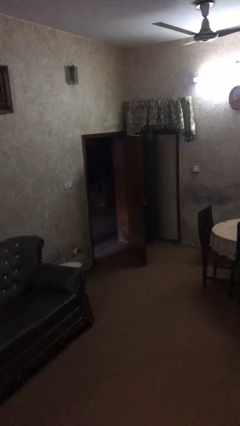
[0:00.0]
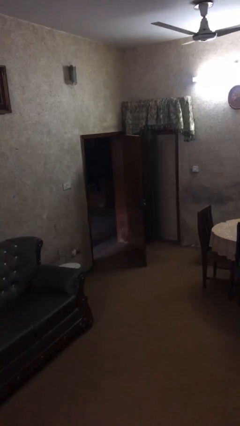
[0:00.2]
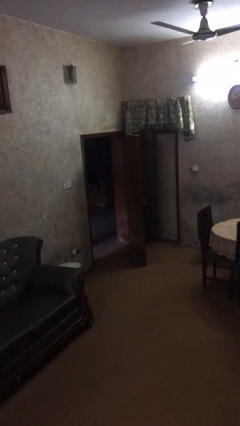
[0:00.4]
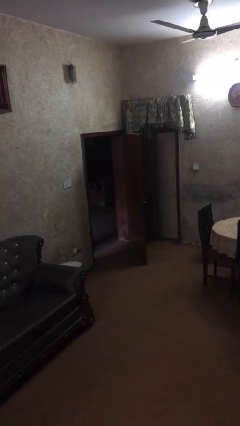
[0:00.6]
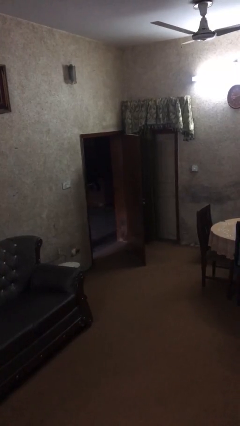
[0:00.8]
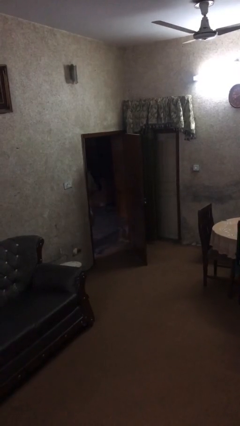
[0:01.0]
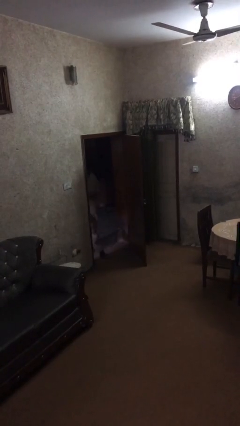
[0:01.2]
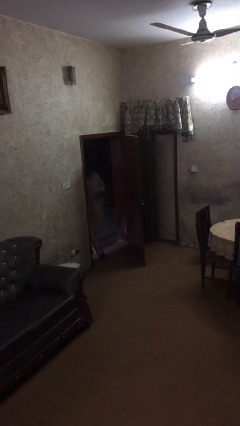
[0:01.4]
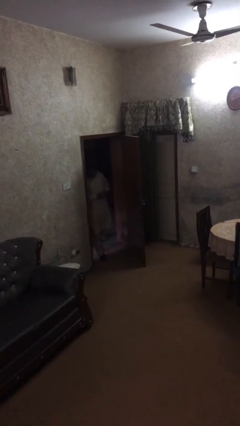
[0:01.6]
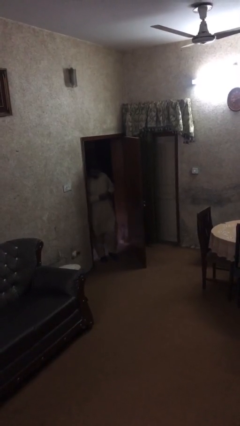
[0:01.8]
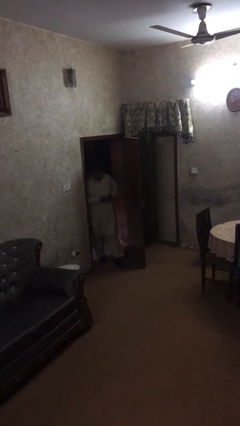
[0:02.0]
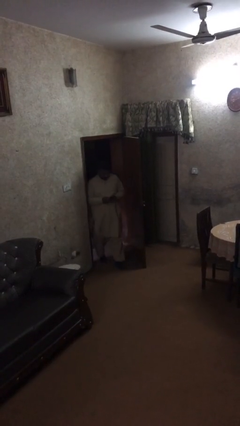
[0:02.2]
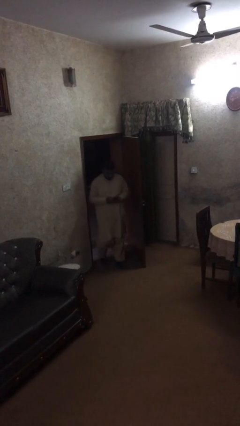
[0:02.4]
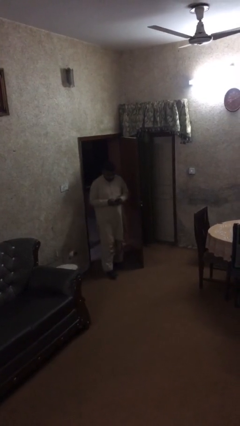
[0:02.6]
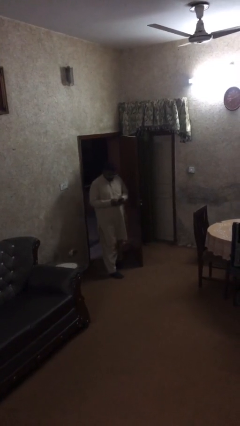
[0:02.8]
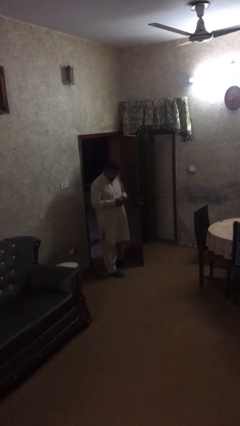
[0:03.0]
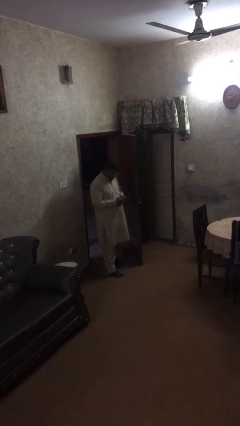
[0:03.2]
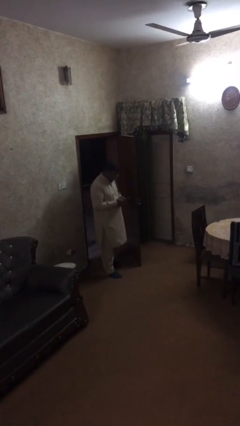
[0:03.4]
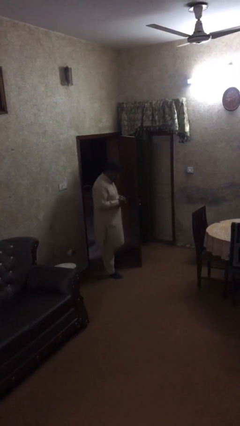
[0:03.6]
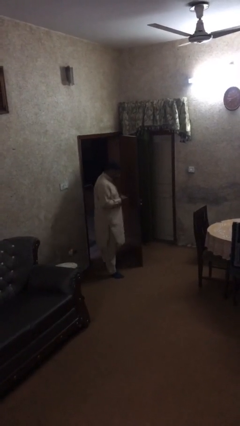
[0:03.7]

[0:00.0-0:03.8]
person enters scene through structure

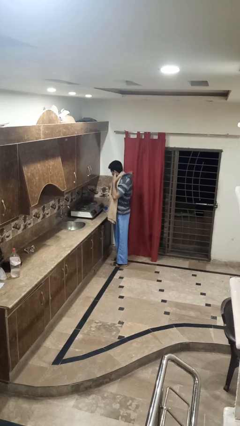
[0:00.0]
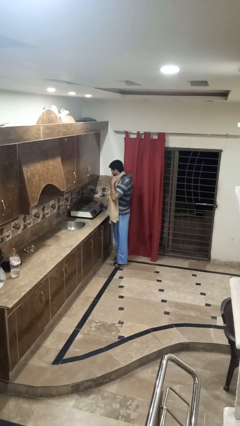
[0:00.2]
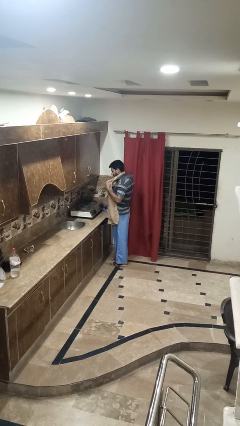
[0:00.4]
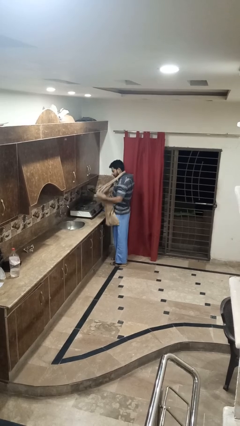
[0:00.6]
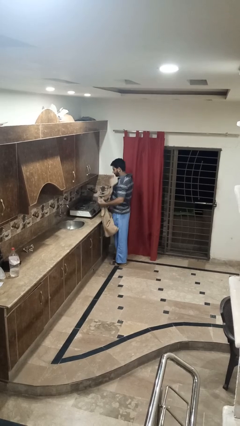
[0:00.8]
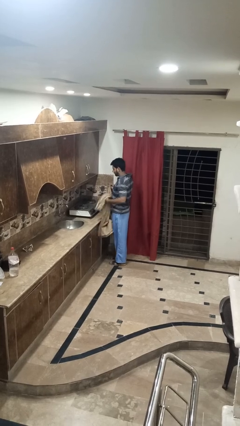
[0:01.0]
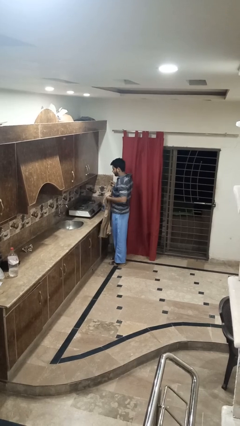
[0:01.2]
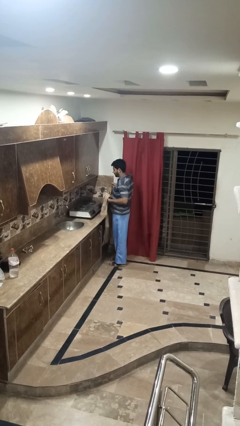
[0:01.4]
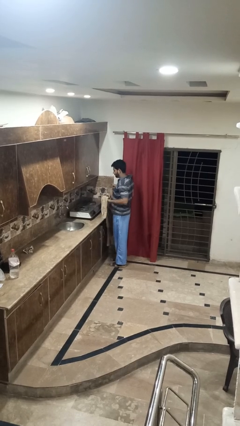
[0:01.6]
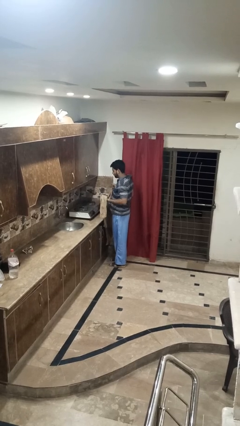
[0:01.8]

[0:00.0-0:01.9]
person takes off apron

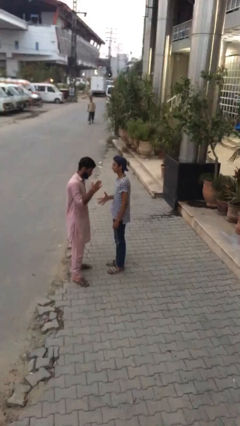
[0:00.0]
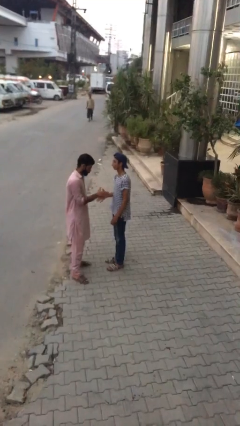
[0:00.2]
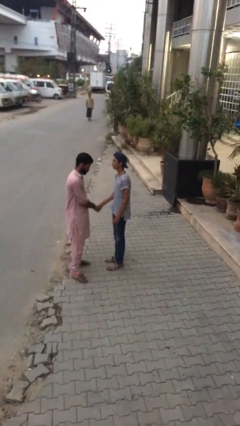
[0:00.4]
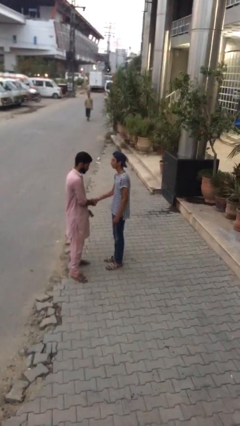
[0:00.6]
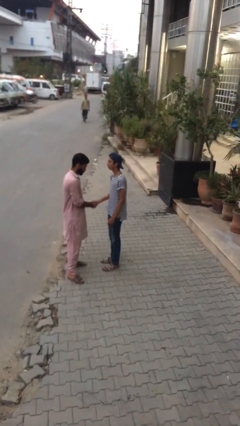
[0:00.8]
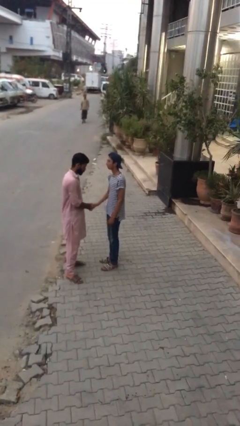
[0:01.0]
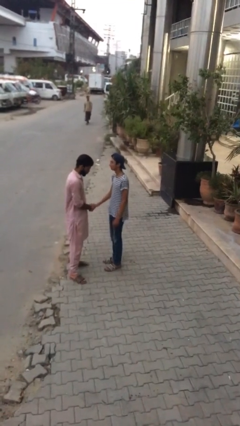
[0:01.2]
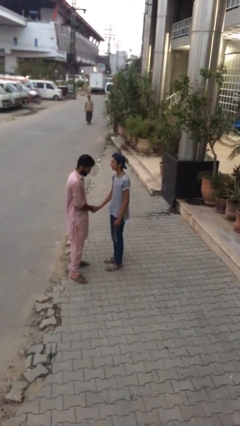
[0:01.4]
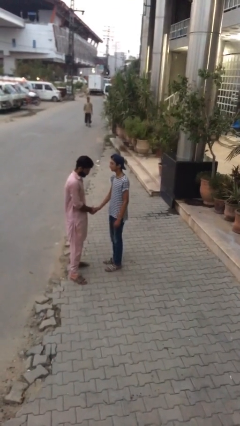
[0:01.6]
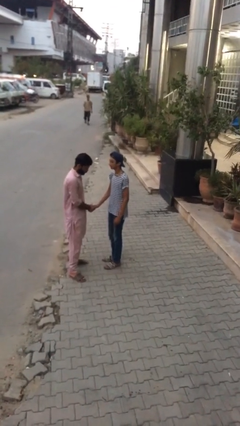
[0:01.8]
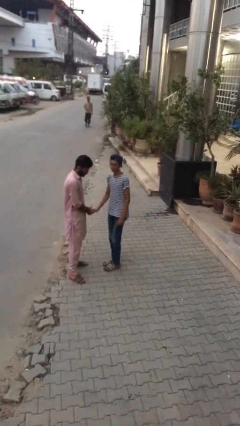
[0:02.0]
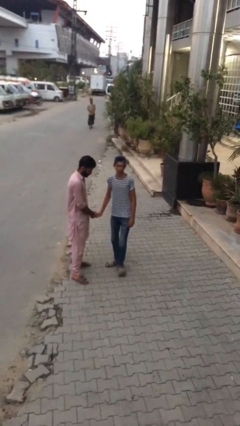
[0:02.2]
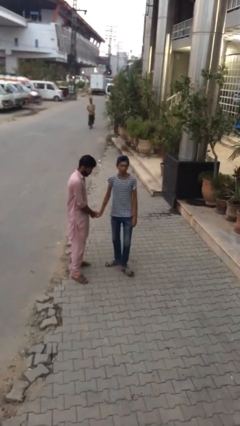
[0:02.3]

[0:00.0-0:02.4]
person shakes hand

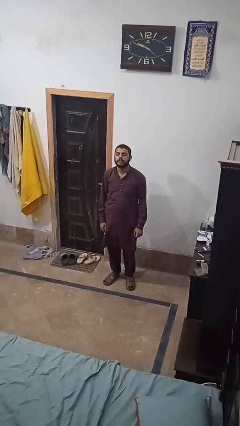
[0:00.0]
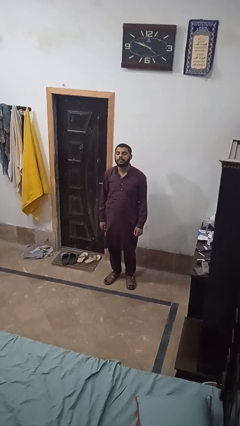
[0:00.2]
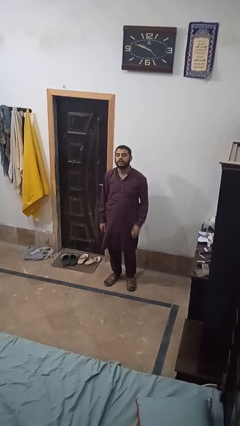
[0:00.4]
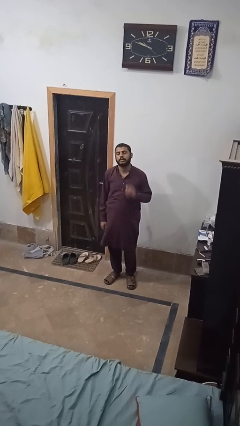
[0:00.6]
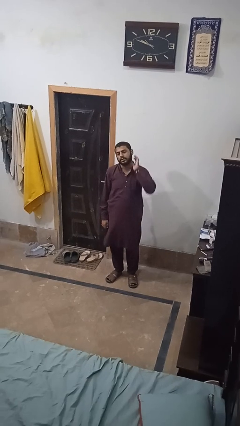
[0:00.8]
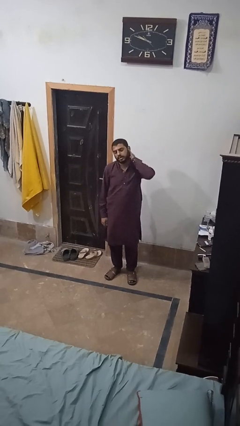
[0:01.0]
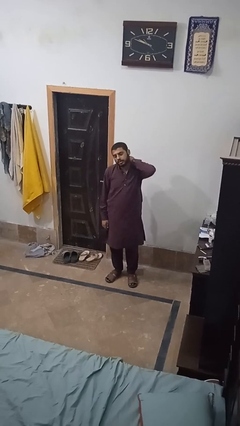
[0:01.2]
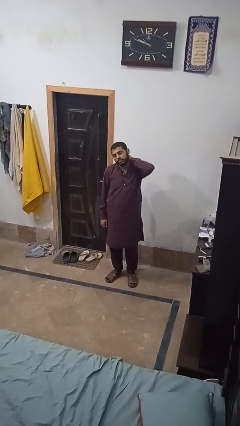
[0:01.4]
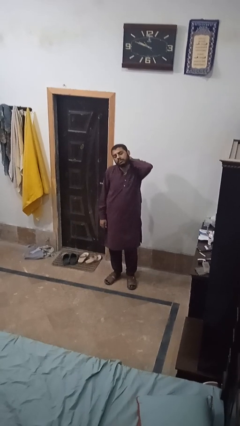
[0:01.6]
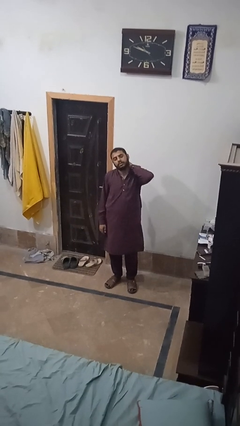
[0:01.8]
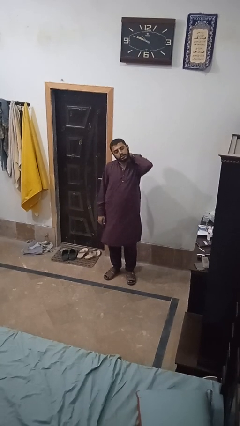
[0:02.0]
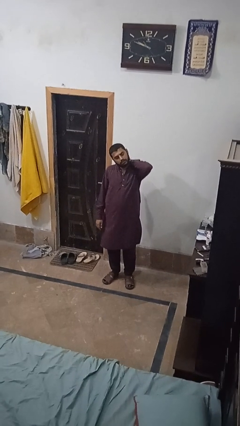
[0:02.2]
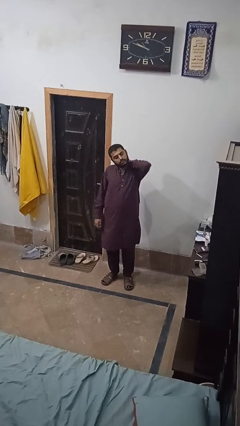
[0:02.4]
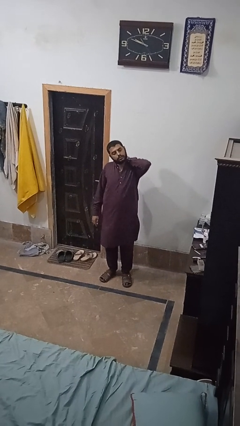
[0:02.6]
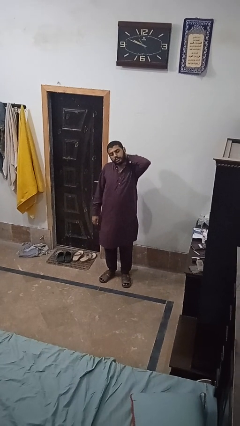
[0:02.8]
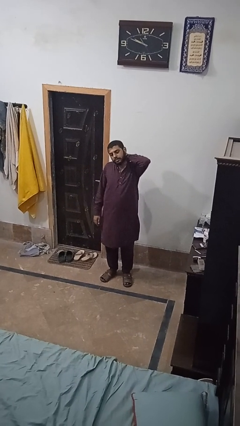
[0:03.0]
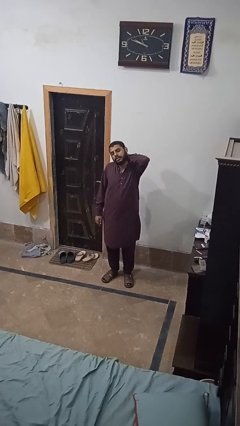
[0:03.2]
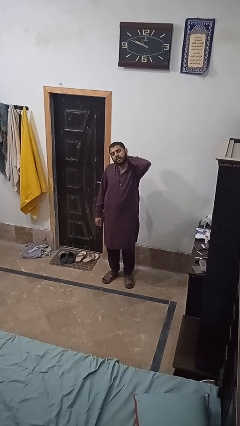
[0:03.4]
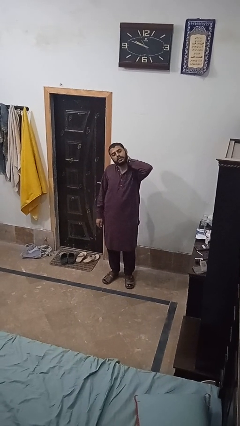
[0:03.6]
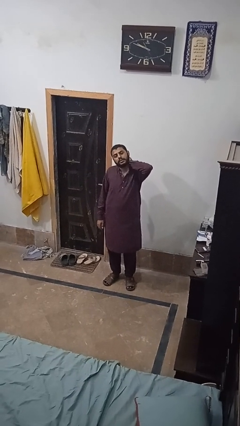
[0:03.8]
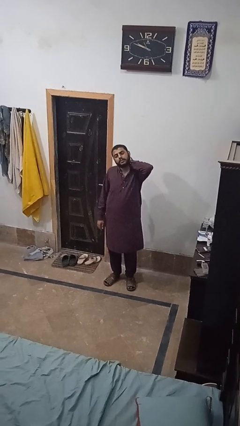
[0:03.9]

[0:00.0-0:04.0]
person rubs neck

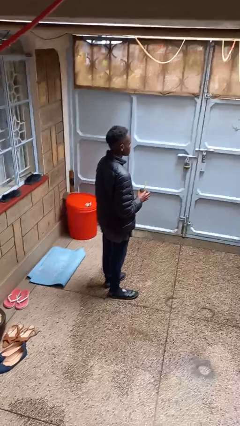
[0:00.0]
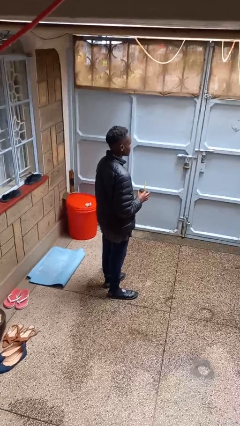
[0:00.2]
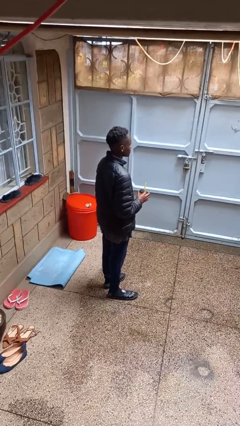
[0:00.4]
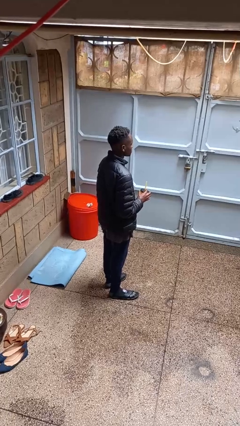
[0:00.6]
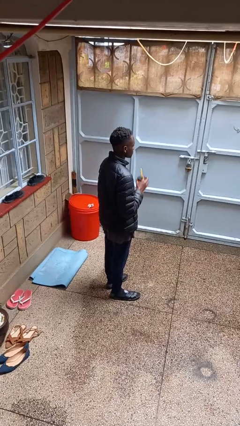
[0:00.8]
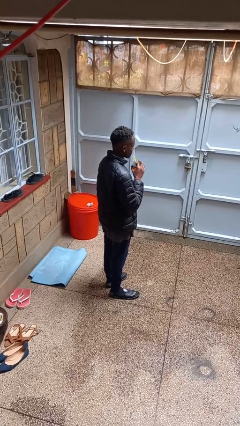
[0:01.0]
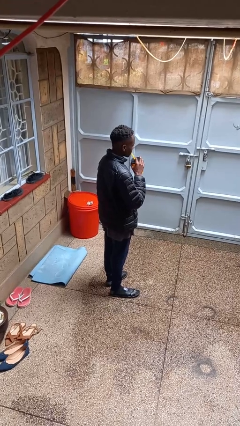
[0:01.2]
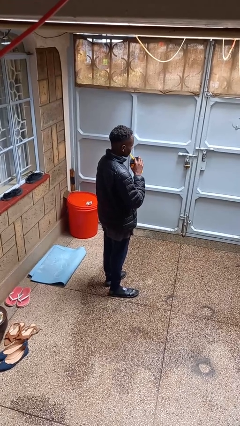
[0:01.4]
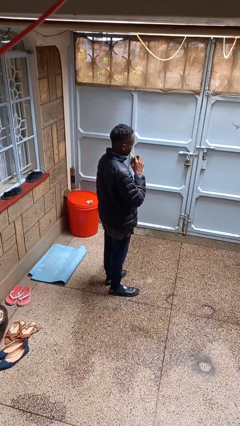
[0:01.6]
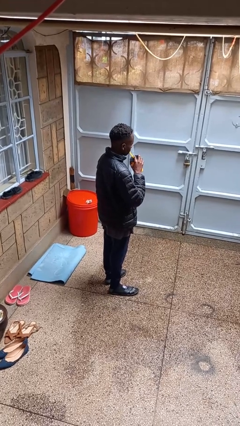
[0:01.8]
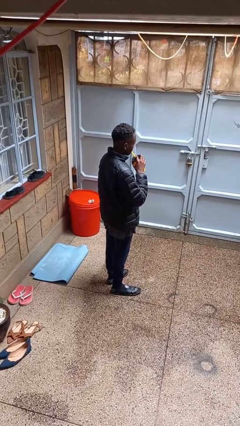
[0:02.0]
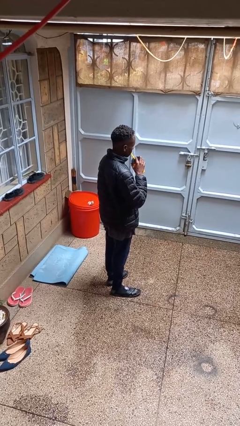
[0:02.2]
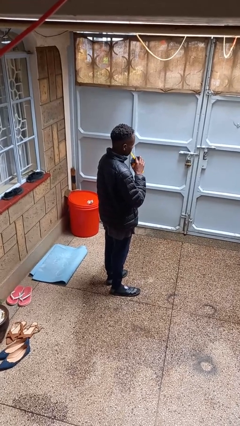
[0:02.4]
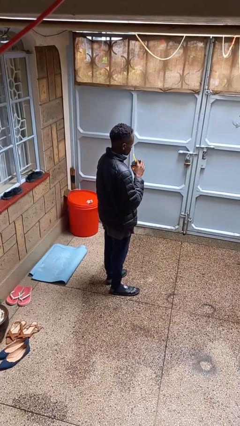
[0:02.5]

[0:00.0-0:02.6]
person drinks from straw

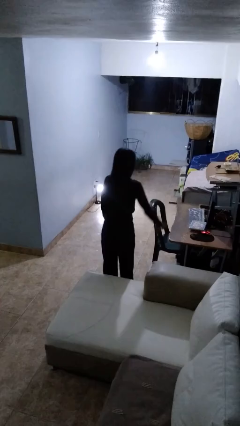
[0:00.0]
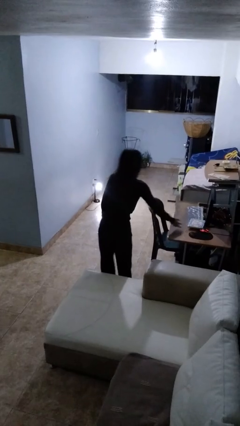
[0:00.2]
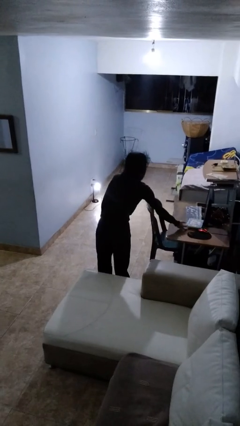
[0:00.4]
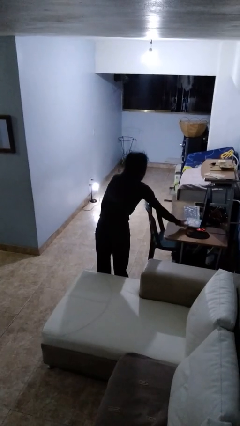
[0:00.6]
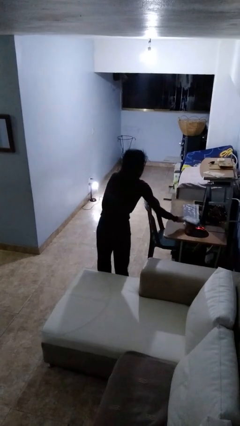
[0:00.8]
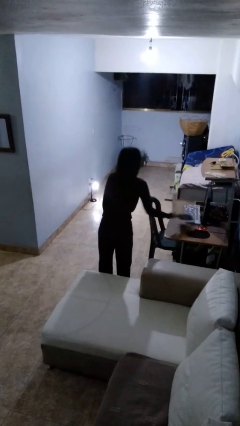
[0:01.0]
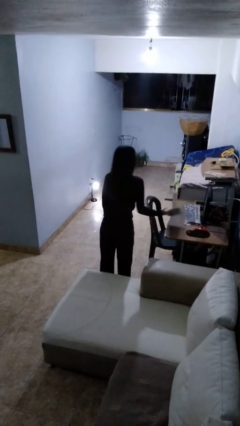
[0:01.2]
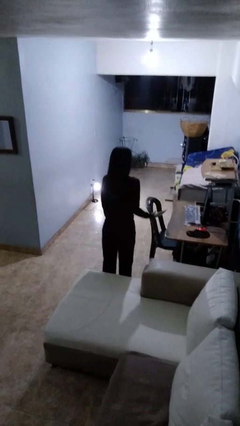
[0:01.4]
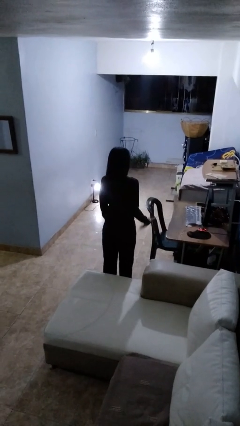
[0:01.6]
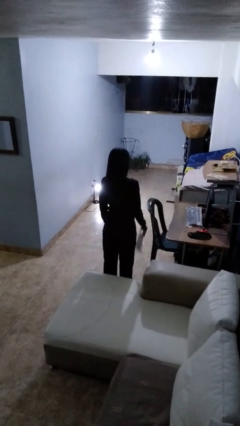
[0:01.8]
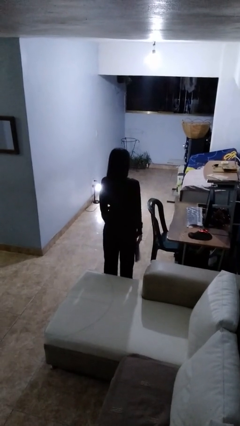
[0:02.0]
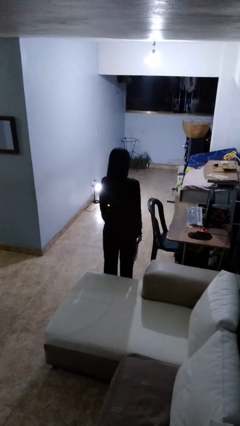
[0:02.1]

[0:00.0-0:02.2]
person picks up object from table

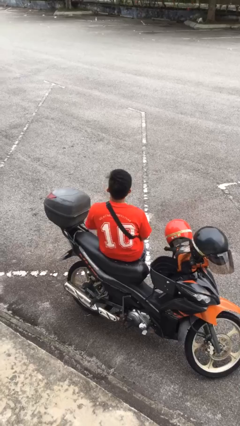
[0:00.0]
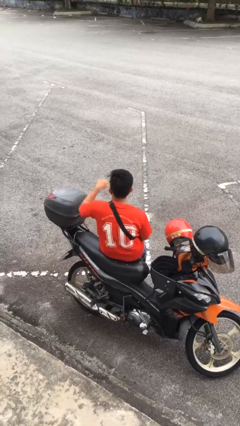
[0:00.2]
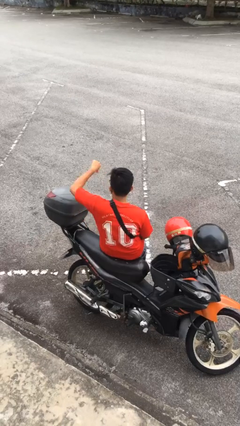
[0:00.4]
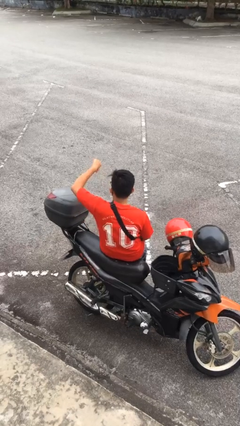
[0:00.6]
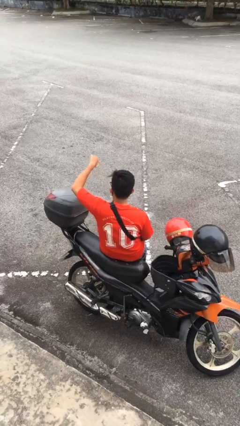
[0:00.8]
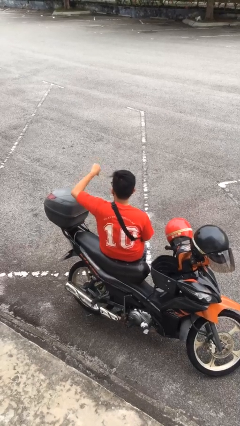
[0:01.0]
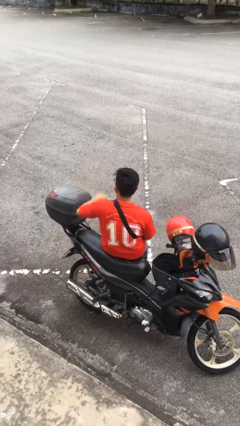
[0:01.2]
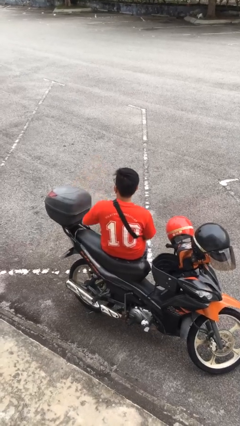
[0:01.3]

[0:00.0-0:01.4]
person gestures thumbs down
